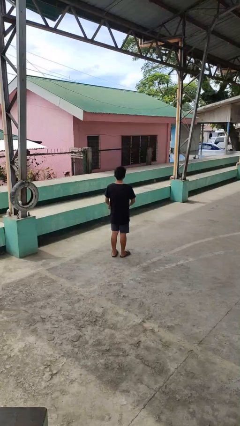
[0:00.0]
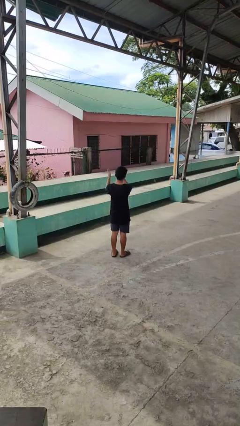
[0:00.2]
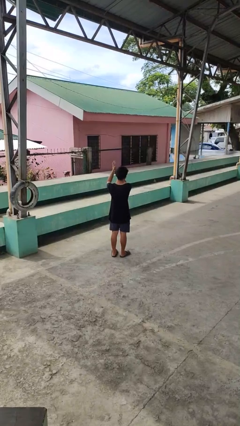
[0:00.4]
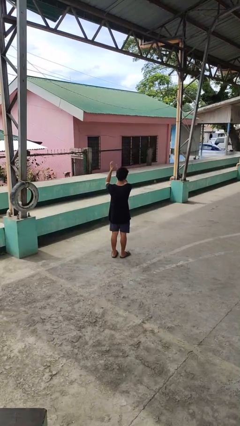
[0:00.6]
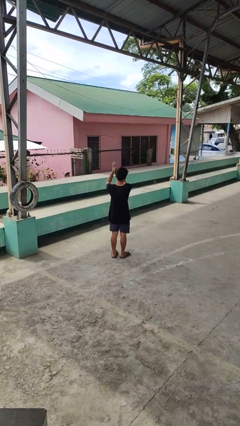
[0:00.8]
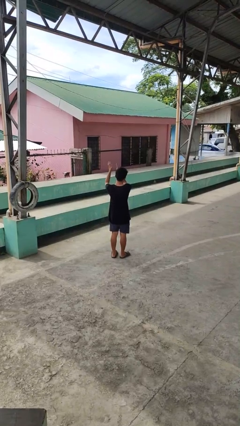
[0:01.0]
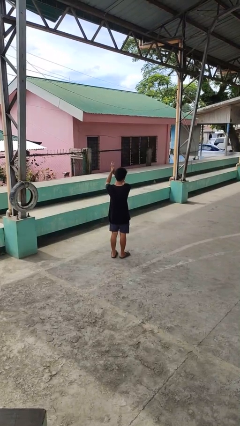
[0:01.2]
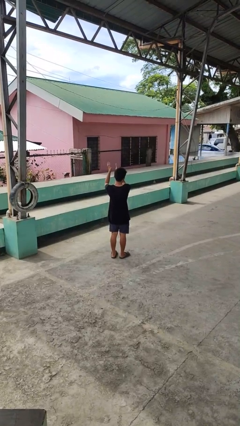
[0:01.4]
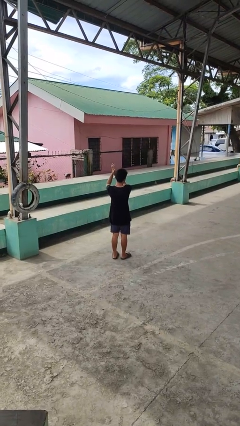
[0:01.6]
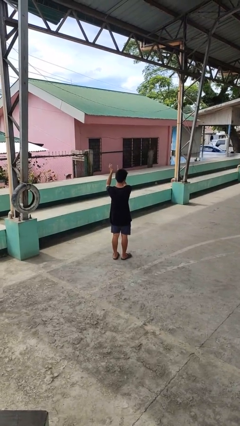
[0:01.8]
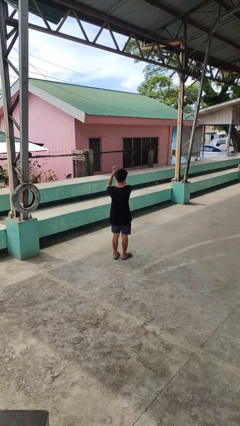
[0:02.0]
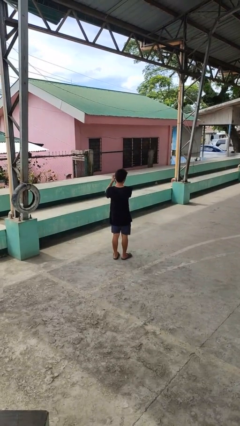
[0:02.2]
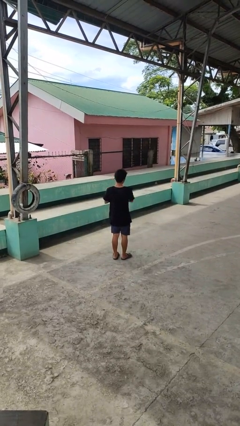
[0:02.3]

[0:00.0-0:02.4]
person claps hands

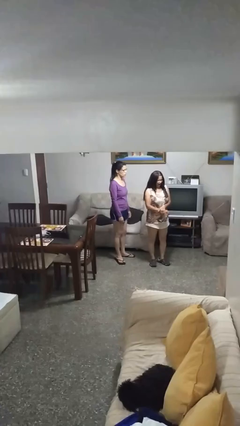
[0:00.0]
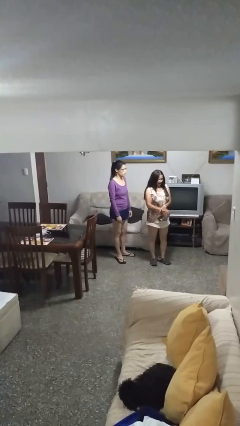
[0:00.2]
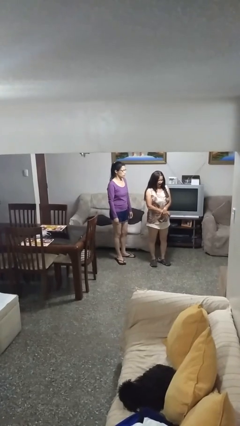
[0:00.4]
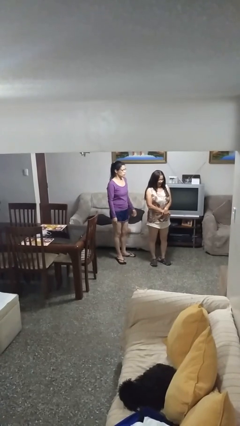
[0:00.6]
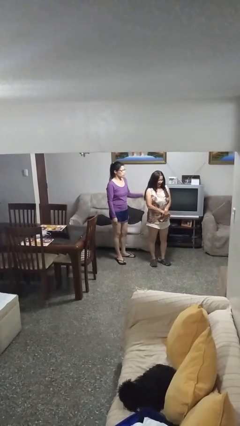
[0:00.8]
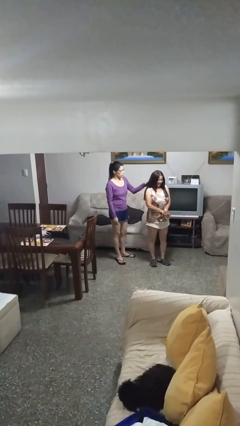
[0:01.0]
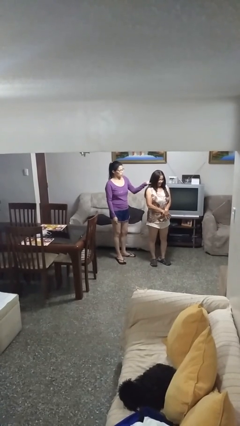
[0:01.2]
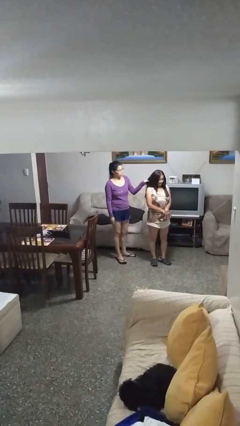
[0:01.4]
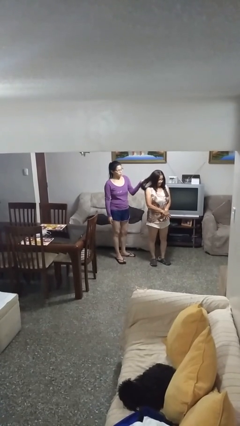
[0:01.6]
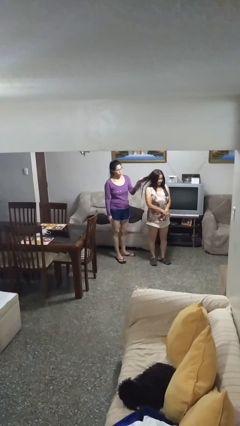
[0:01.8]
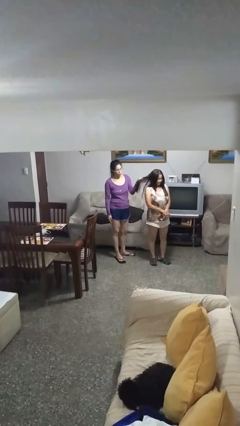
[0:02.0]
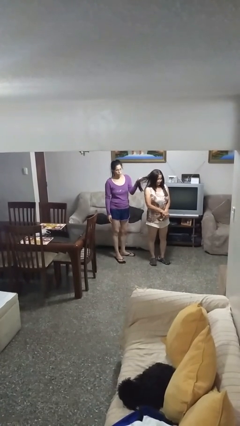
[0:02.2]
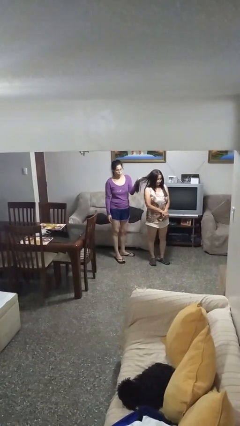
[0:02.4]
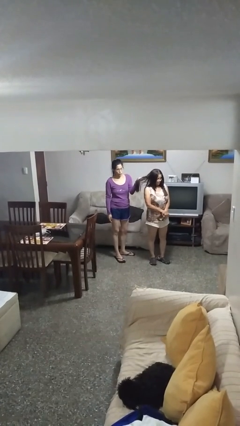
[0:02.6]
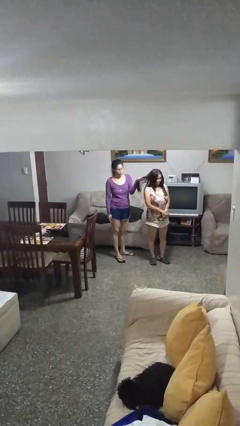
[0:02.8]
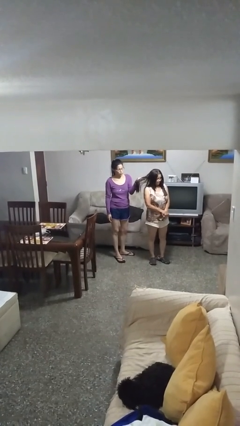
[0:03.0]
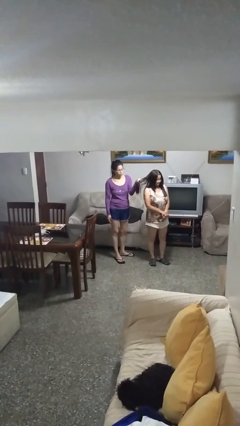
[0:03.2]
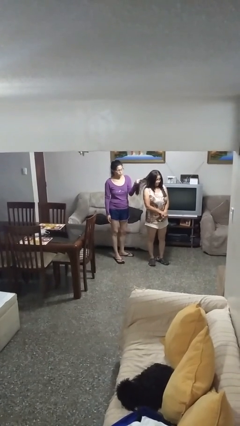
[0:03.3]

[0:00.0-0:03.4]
person grabs person by hair

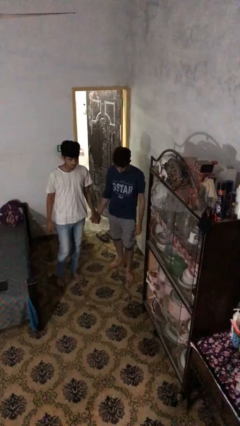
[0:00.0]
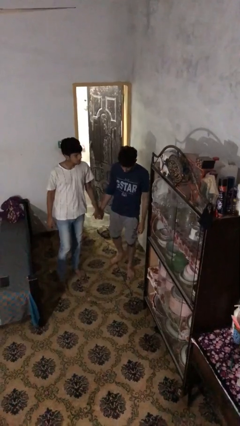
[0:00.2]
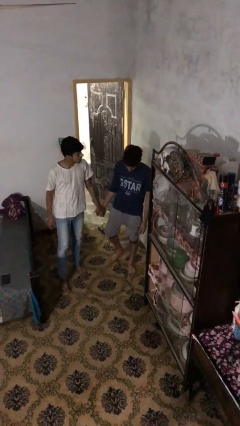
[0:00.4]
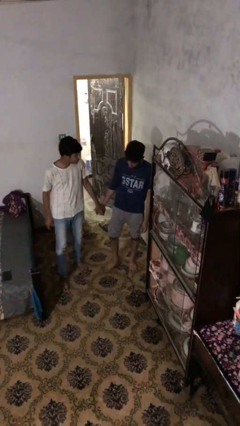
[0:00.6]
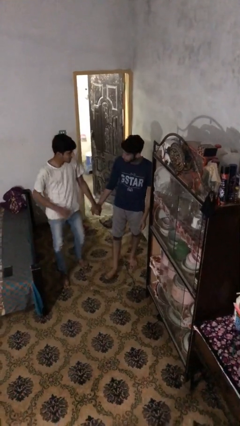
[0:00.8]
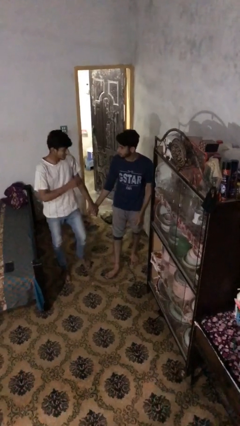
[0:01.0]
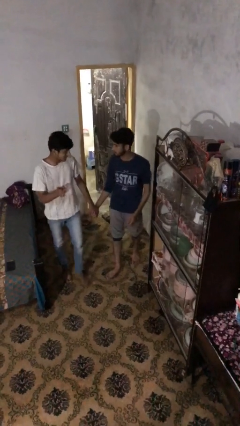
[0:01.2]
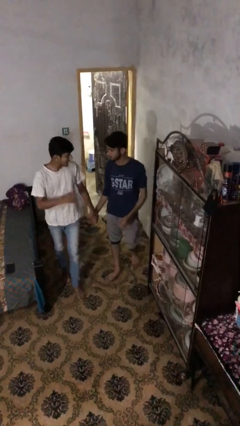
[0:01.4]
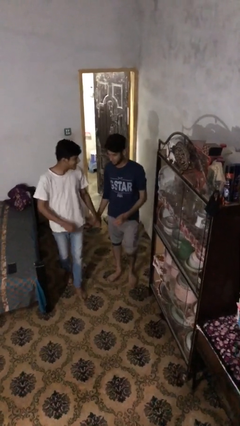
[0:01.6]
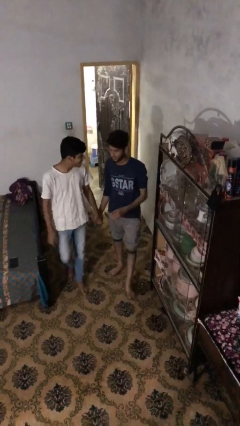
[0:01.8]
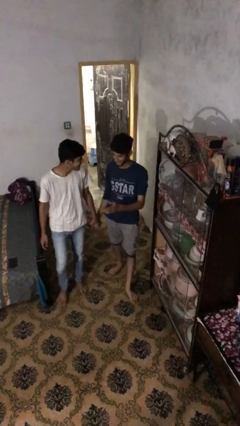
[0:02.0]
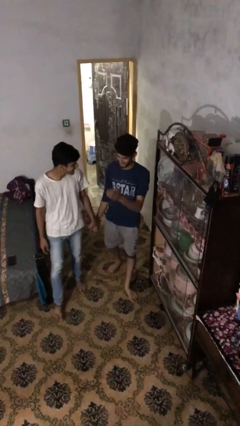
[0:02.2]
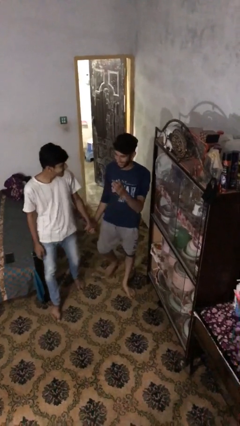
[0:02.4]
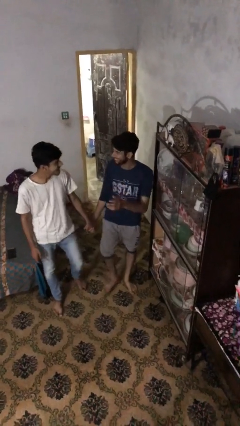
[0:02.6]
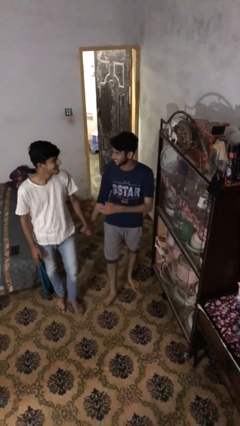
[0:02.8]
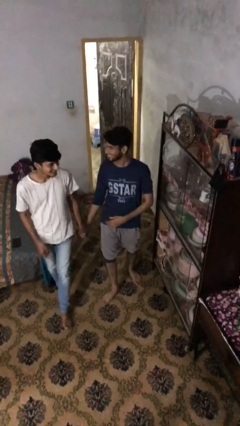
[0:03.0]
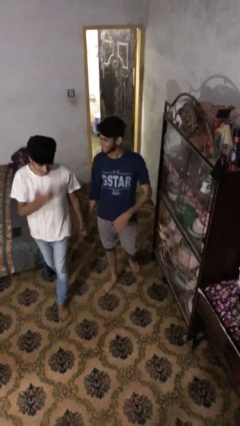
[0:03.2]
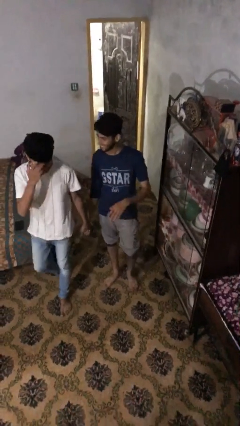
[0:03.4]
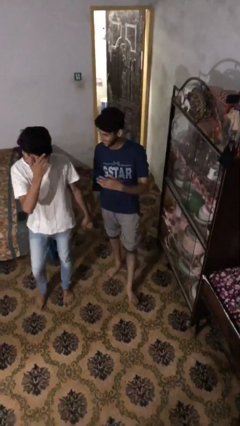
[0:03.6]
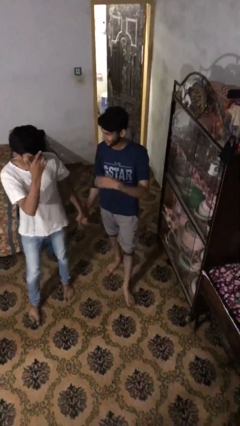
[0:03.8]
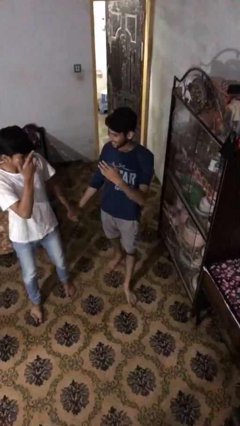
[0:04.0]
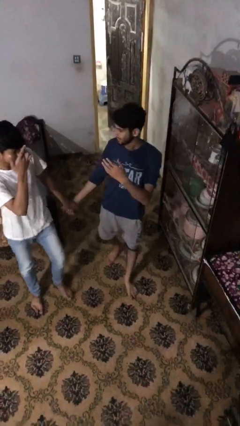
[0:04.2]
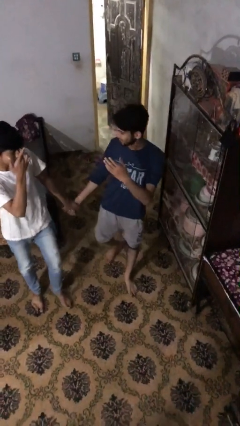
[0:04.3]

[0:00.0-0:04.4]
person holds hand

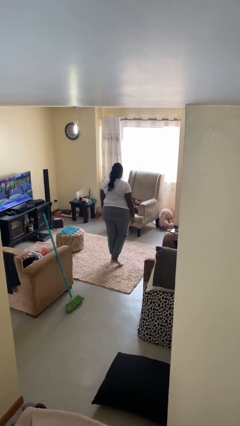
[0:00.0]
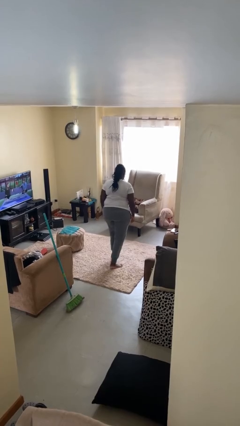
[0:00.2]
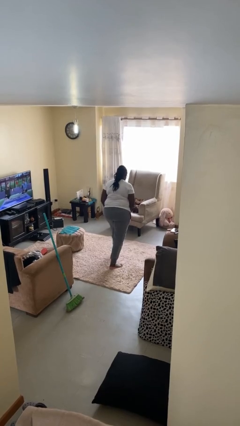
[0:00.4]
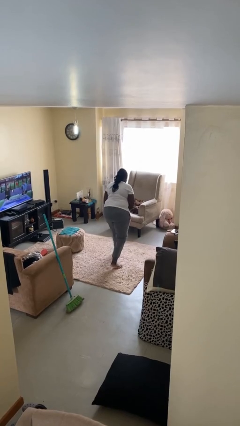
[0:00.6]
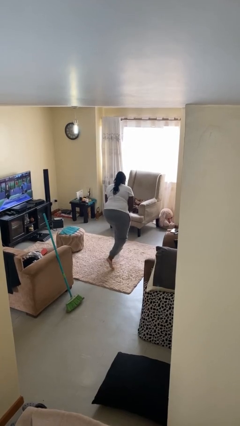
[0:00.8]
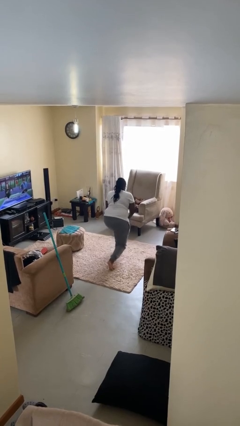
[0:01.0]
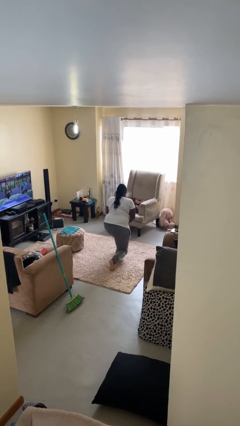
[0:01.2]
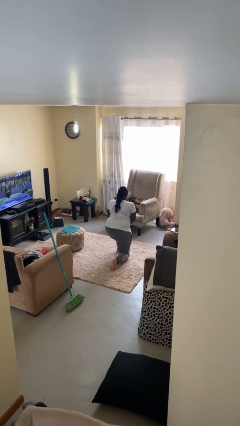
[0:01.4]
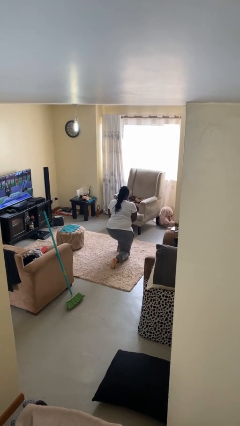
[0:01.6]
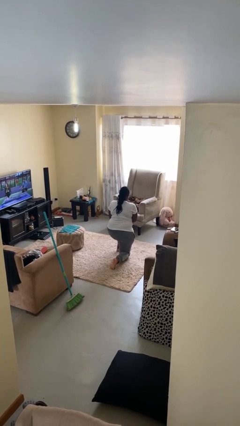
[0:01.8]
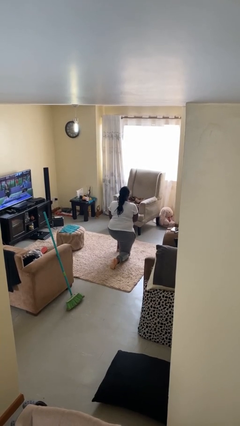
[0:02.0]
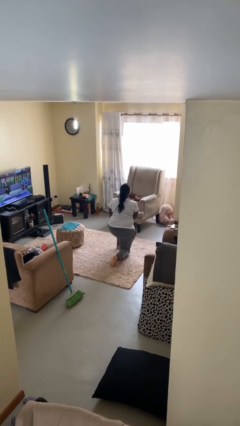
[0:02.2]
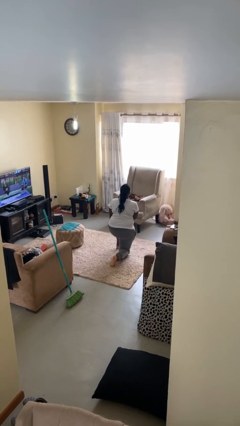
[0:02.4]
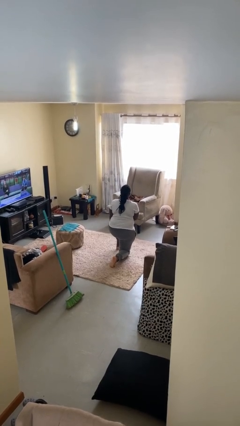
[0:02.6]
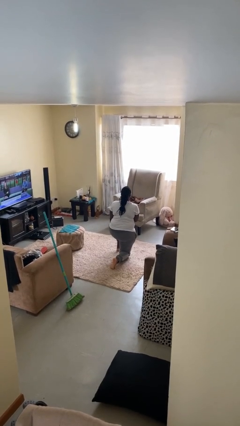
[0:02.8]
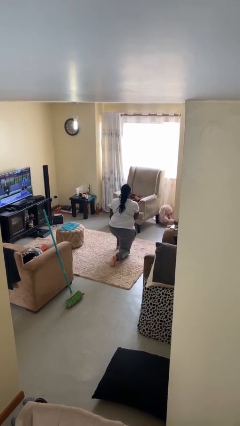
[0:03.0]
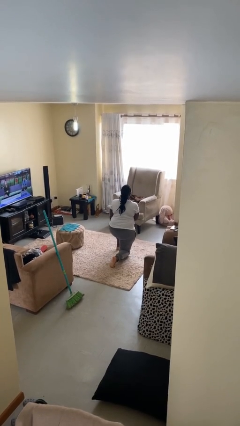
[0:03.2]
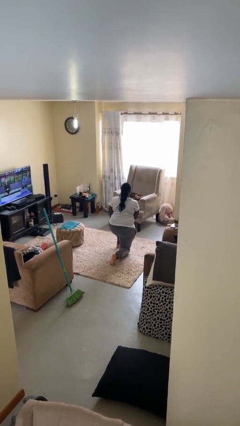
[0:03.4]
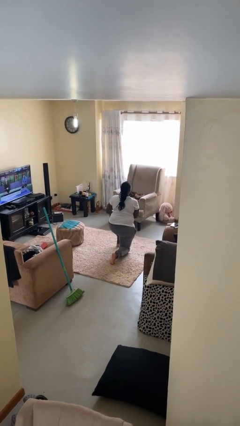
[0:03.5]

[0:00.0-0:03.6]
person kneels

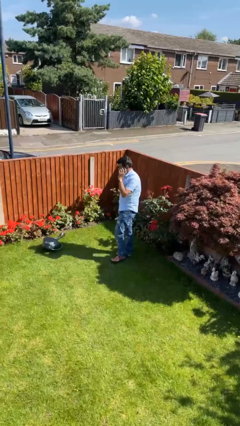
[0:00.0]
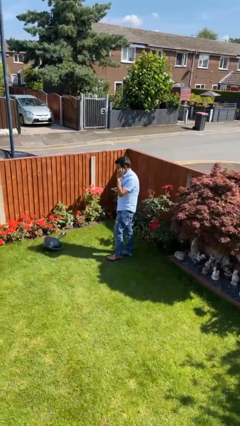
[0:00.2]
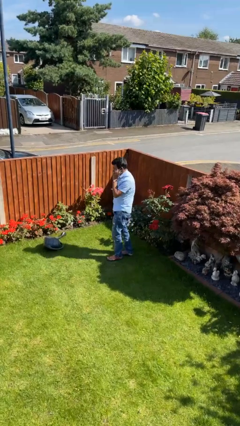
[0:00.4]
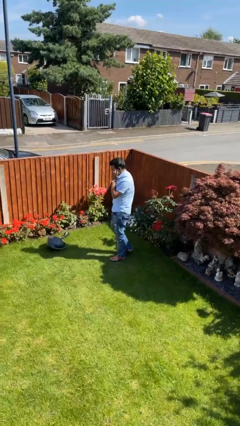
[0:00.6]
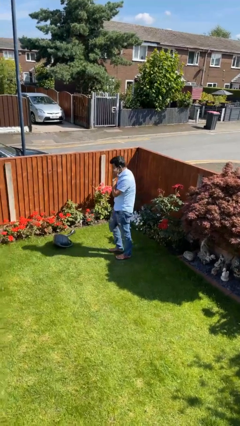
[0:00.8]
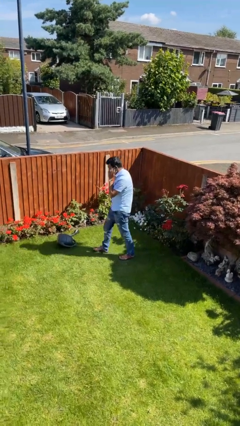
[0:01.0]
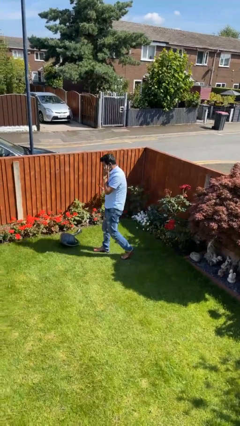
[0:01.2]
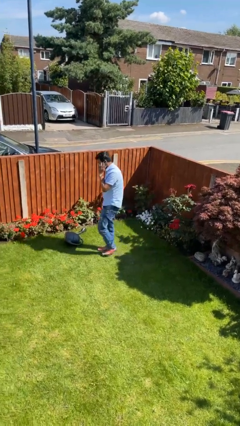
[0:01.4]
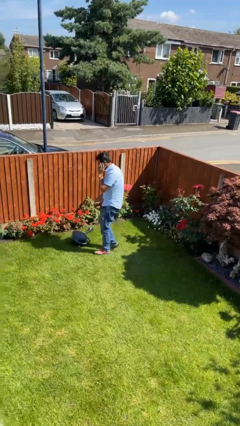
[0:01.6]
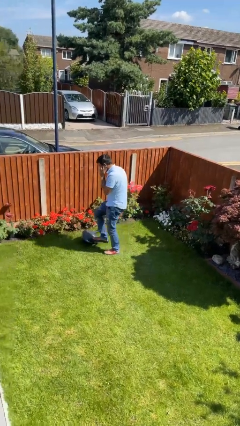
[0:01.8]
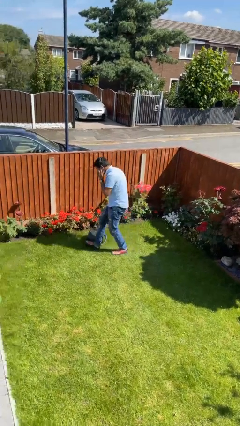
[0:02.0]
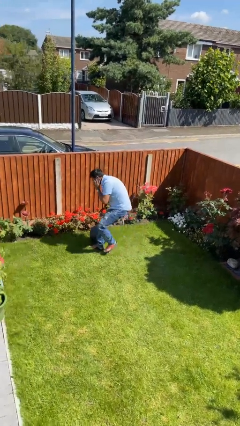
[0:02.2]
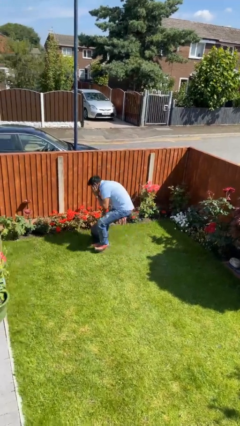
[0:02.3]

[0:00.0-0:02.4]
person trips on object on floor

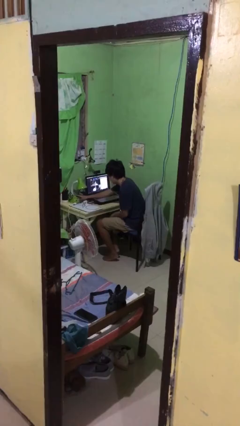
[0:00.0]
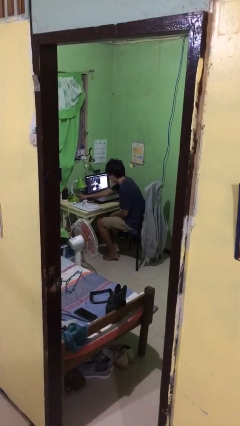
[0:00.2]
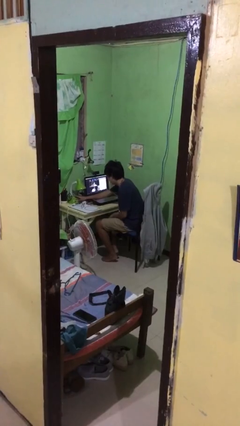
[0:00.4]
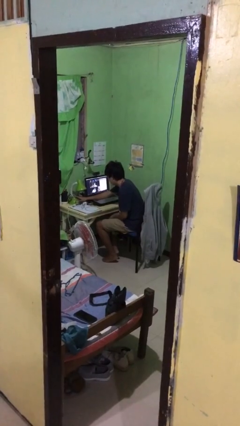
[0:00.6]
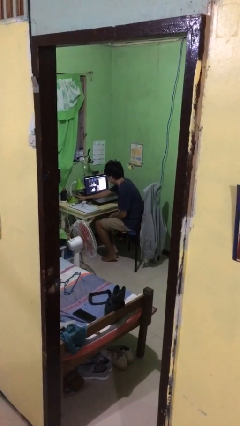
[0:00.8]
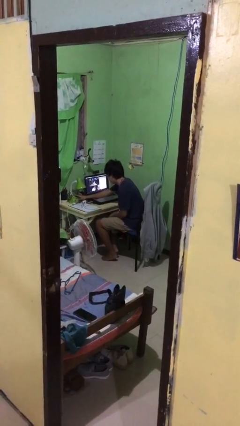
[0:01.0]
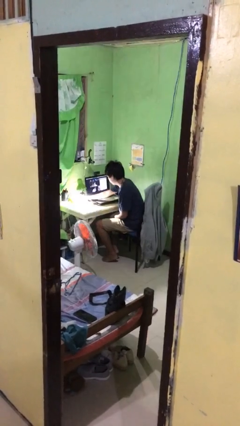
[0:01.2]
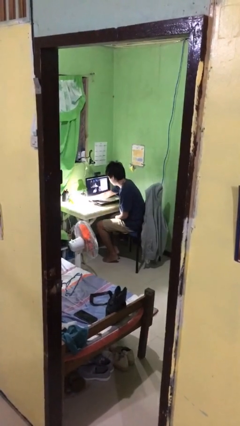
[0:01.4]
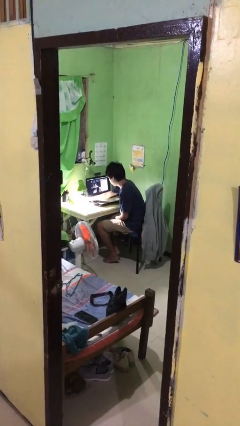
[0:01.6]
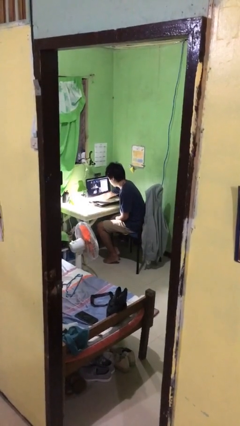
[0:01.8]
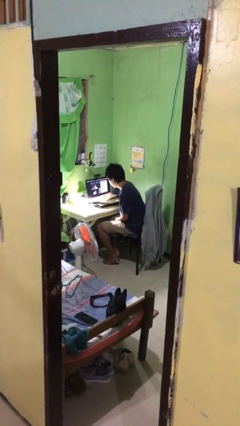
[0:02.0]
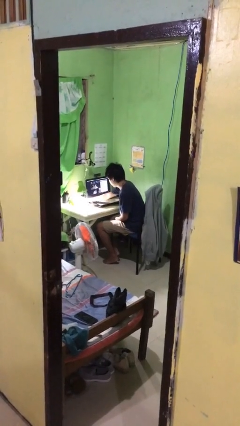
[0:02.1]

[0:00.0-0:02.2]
person turns on lamp
